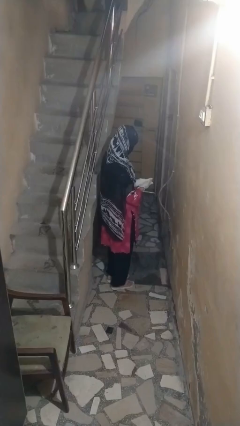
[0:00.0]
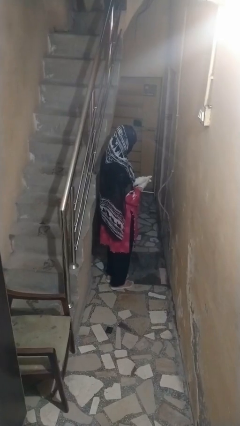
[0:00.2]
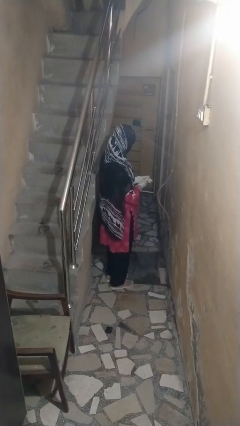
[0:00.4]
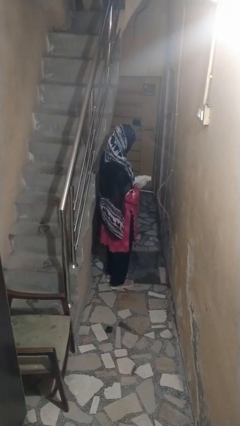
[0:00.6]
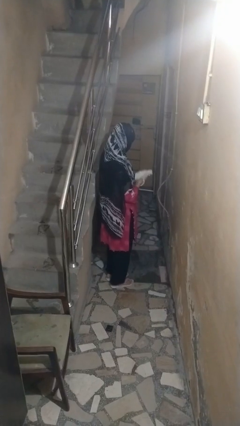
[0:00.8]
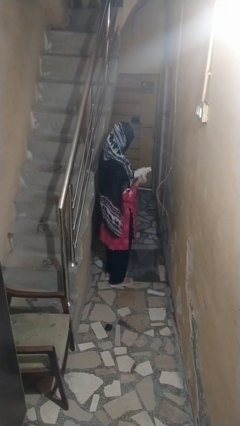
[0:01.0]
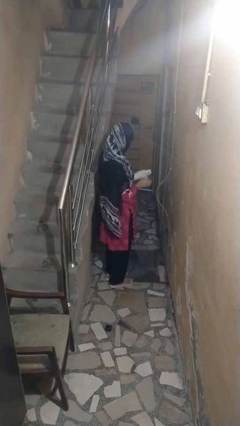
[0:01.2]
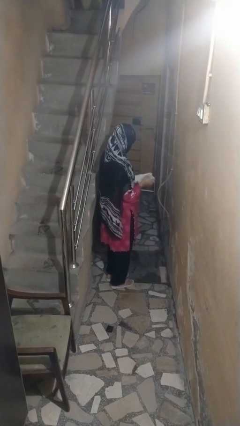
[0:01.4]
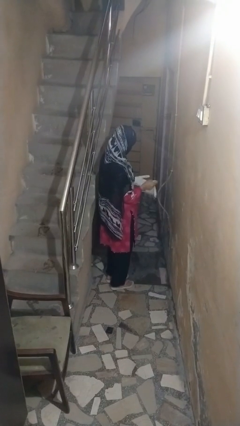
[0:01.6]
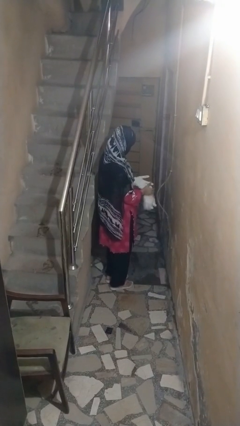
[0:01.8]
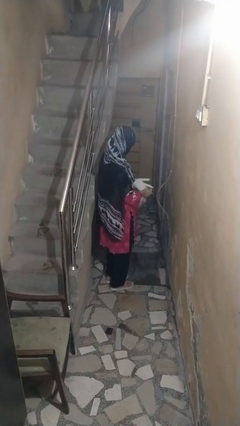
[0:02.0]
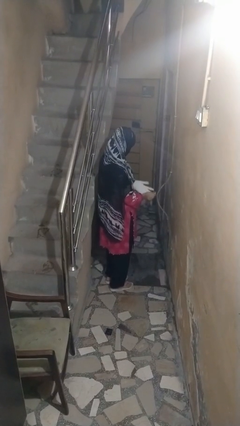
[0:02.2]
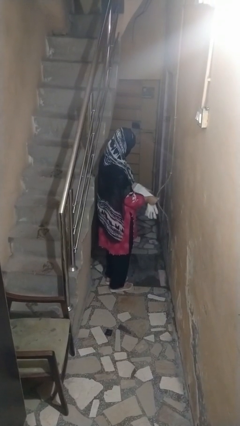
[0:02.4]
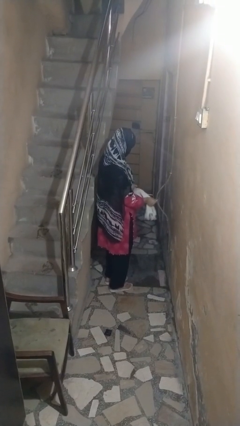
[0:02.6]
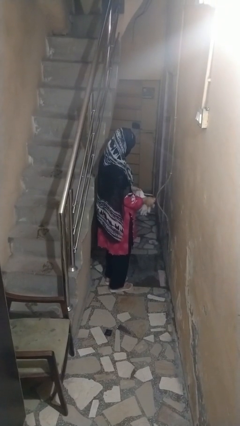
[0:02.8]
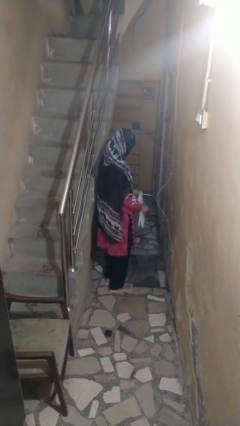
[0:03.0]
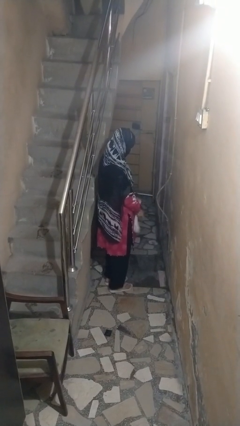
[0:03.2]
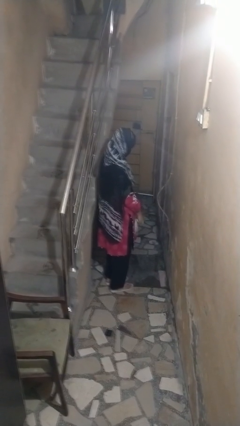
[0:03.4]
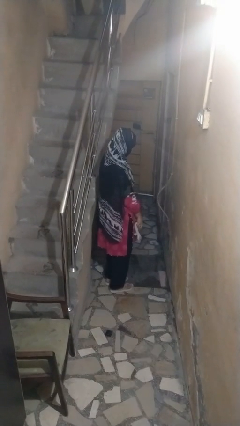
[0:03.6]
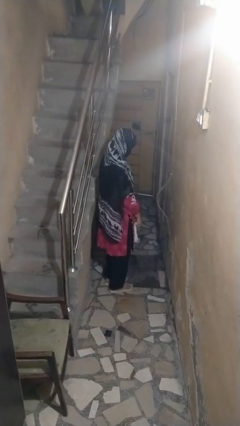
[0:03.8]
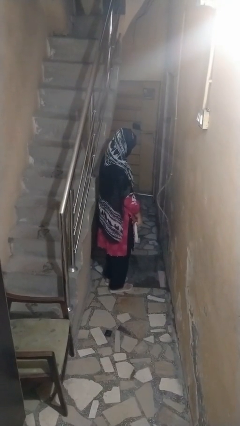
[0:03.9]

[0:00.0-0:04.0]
person takes off gloves

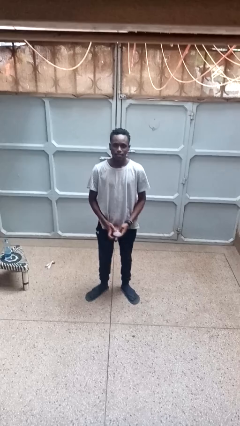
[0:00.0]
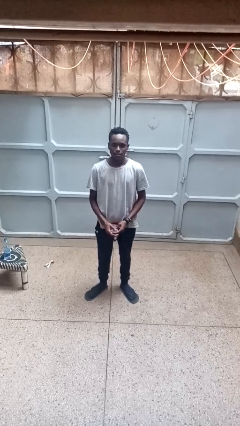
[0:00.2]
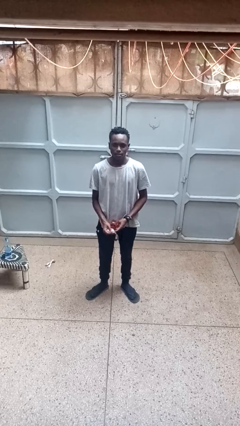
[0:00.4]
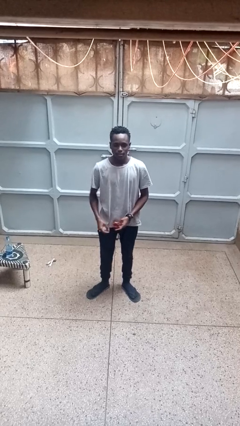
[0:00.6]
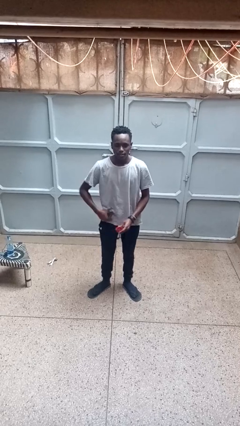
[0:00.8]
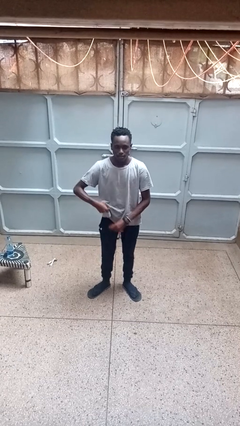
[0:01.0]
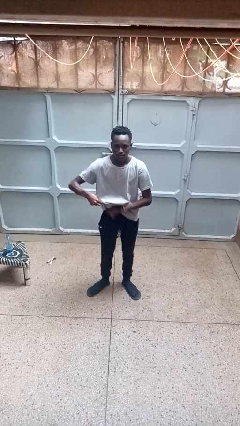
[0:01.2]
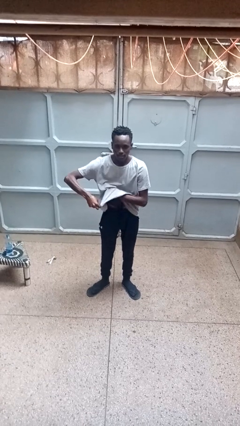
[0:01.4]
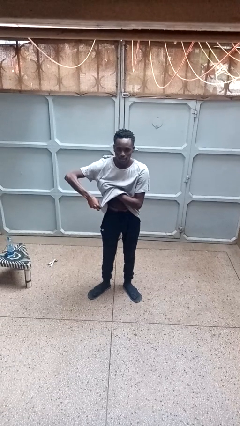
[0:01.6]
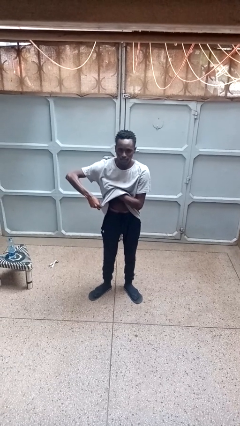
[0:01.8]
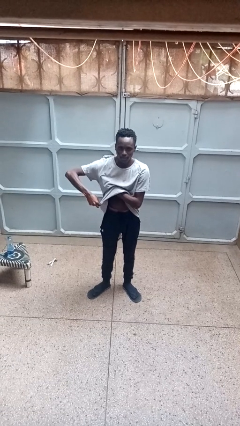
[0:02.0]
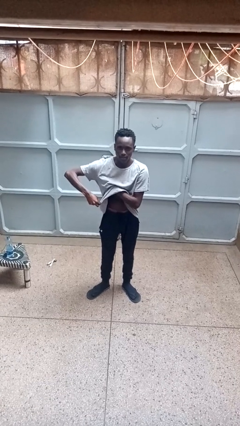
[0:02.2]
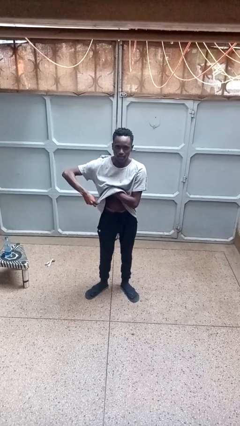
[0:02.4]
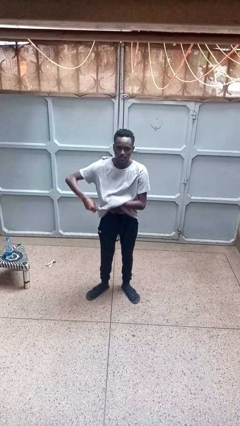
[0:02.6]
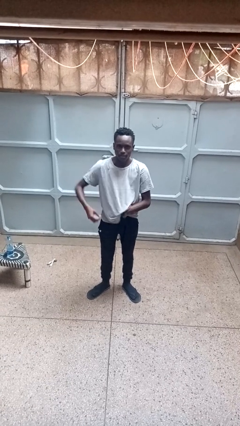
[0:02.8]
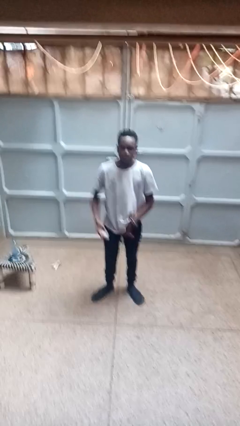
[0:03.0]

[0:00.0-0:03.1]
person applies deodorant

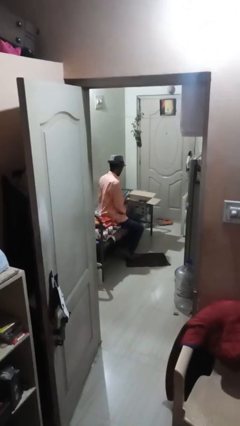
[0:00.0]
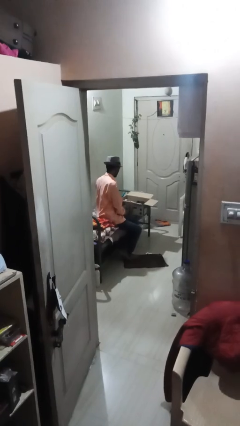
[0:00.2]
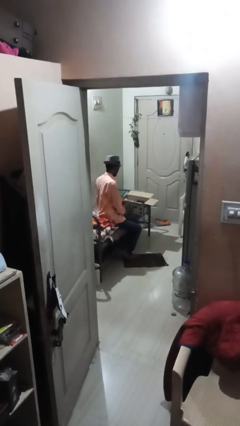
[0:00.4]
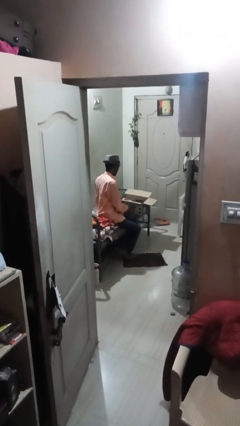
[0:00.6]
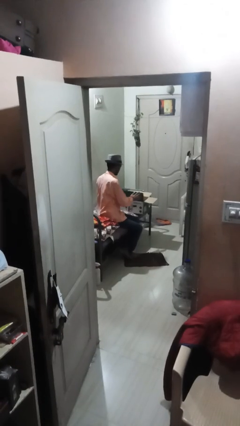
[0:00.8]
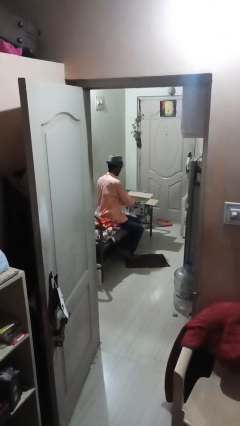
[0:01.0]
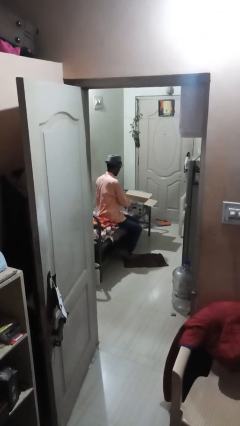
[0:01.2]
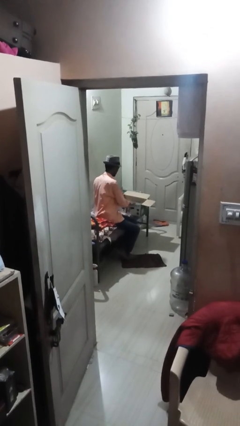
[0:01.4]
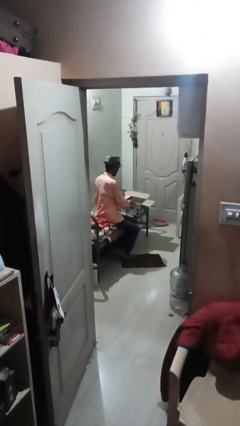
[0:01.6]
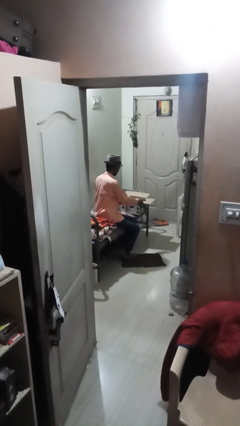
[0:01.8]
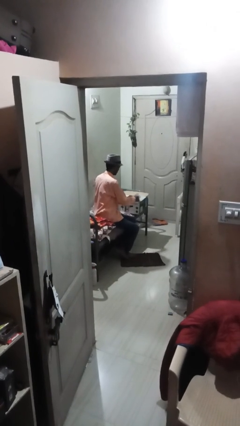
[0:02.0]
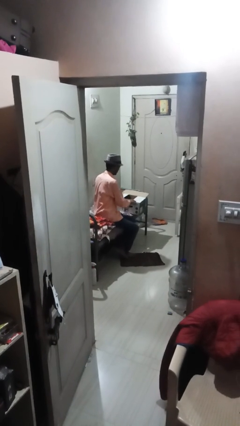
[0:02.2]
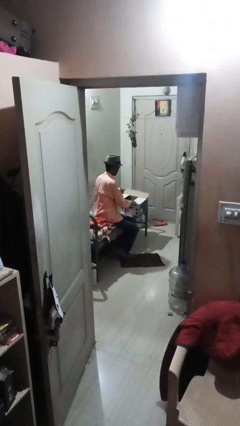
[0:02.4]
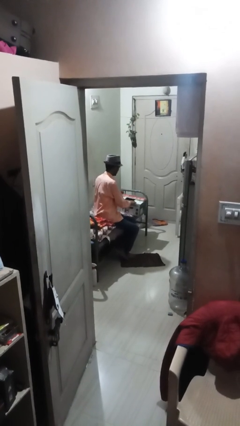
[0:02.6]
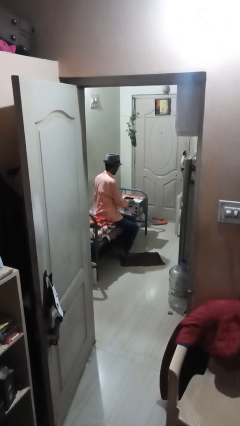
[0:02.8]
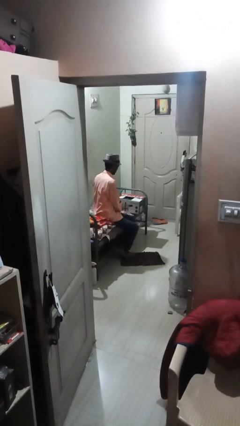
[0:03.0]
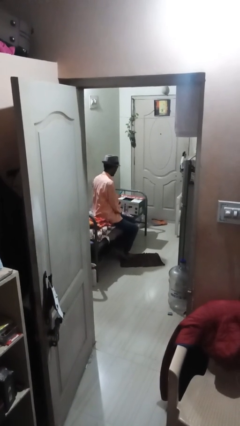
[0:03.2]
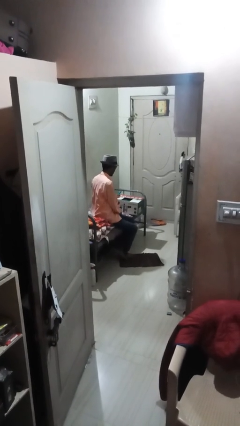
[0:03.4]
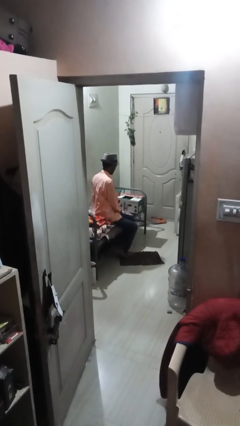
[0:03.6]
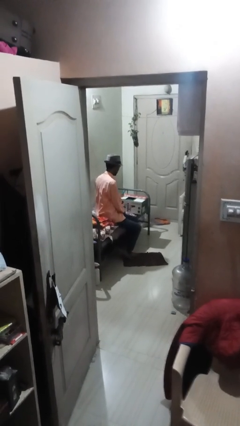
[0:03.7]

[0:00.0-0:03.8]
person closes box

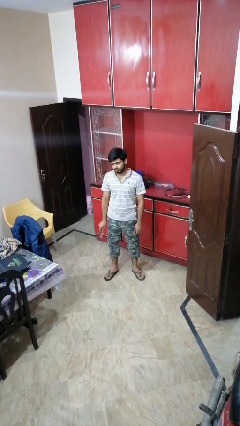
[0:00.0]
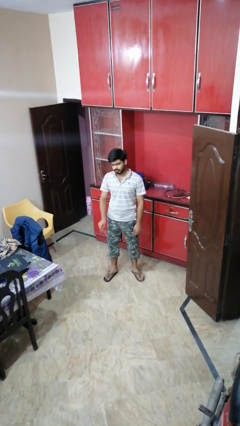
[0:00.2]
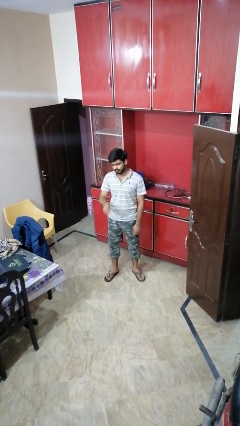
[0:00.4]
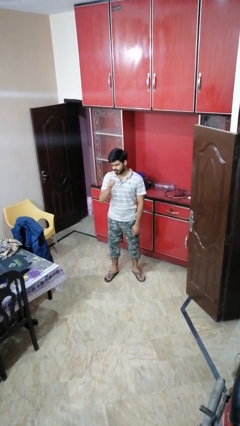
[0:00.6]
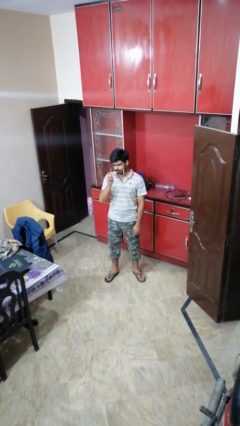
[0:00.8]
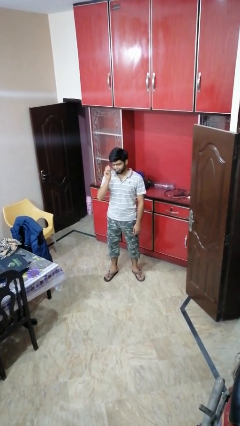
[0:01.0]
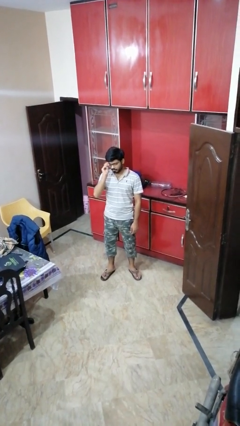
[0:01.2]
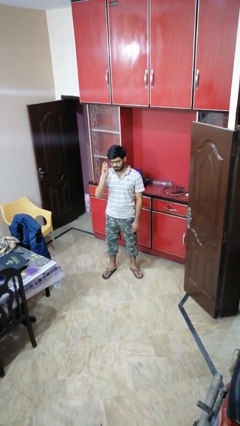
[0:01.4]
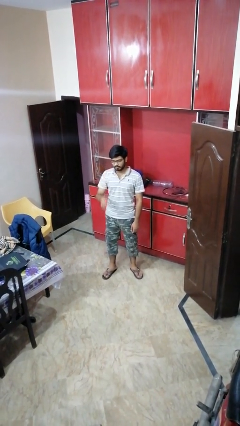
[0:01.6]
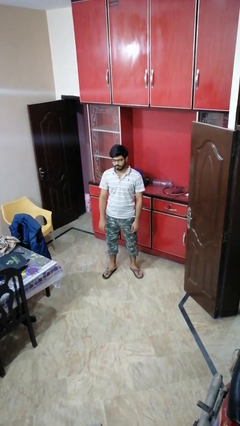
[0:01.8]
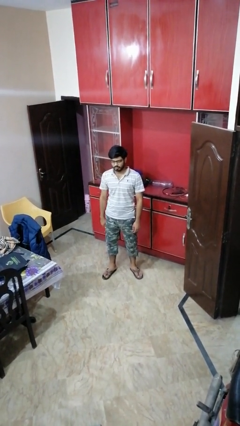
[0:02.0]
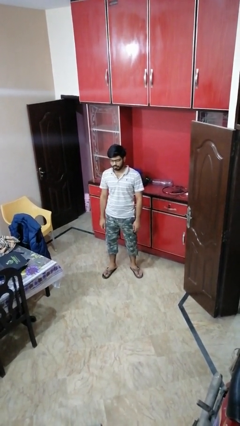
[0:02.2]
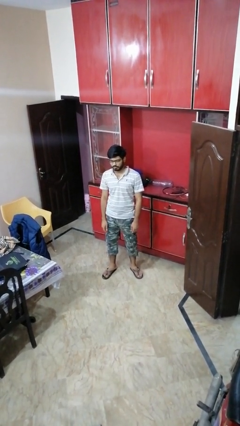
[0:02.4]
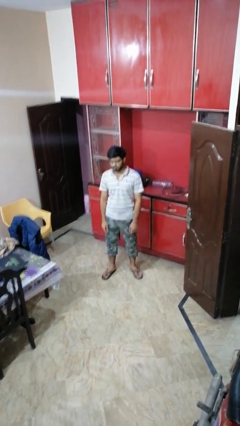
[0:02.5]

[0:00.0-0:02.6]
person puts on glasses

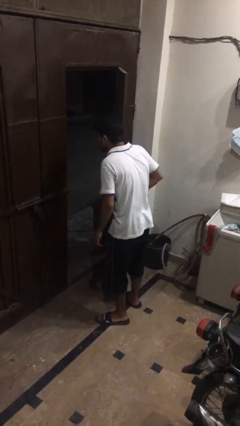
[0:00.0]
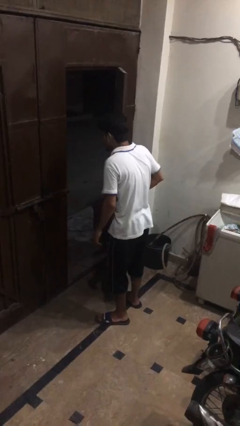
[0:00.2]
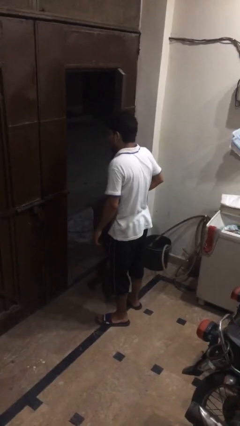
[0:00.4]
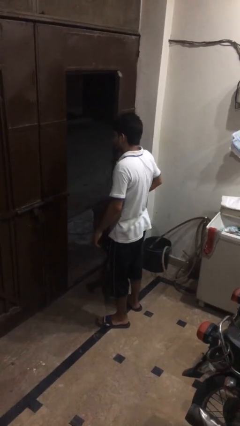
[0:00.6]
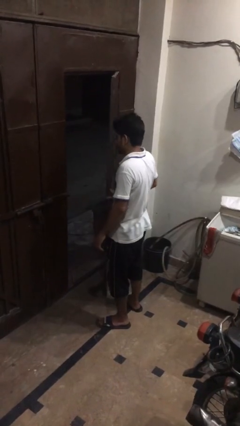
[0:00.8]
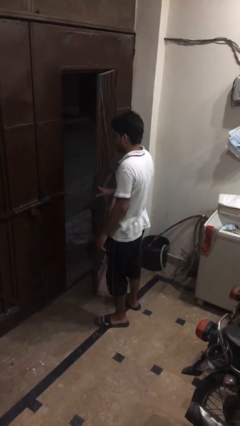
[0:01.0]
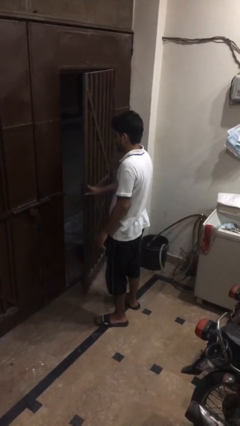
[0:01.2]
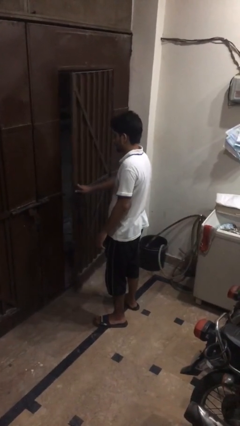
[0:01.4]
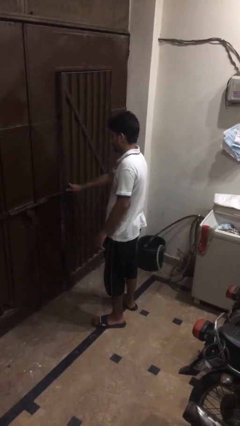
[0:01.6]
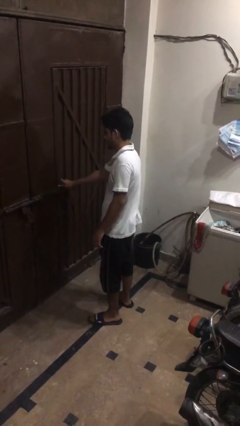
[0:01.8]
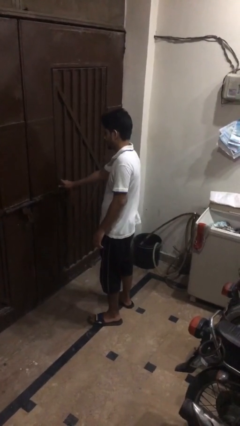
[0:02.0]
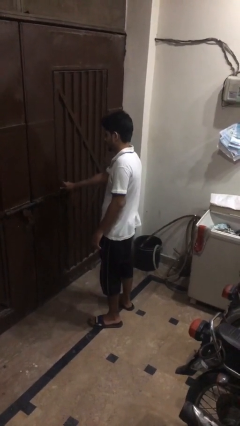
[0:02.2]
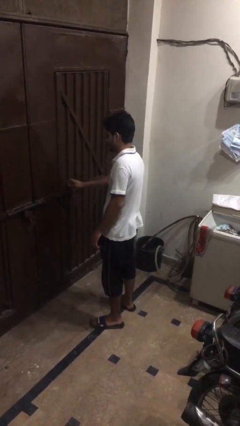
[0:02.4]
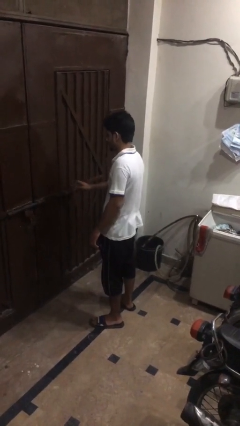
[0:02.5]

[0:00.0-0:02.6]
person closes gate

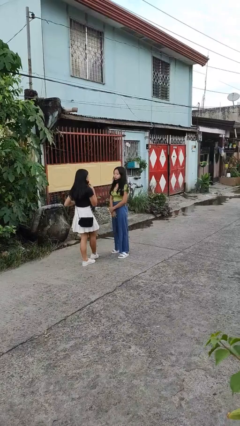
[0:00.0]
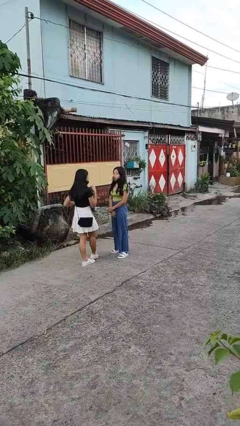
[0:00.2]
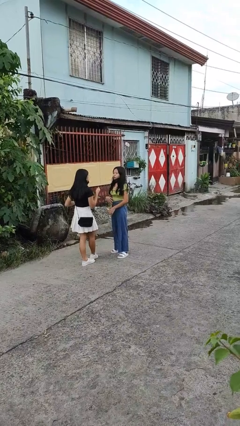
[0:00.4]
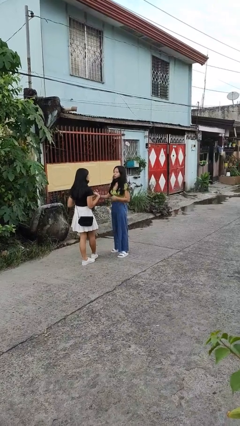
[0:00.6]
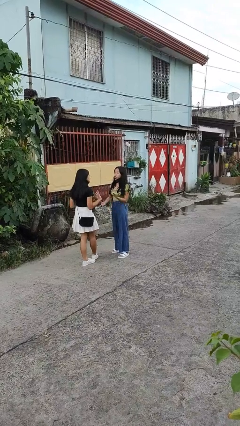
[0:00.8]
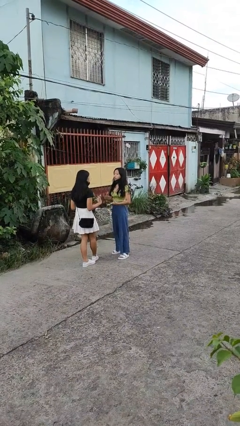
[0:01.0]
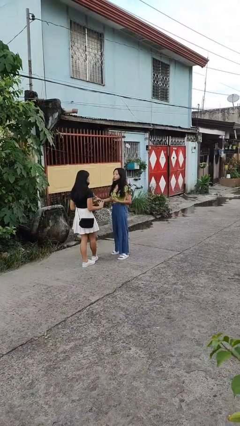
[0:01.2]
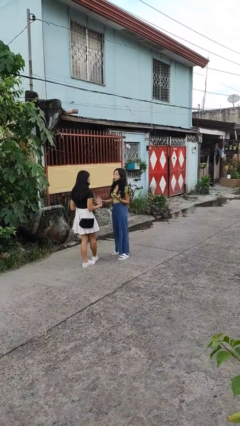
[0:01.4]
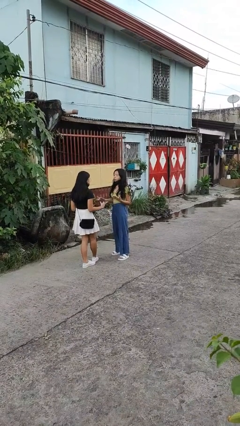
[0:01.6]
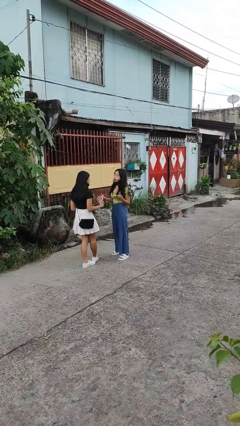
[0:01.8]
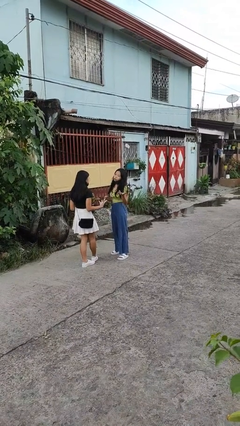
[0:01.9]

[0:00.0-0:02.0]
person talks to person
